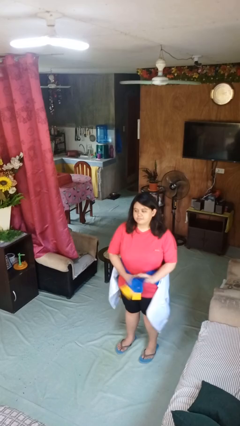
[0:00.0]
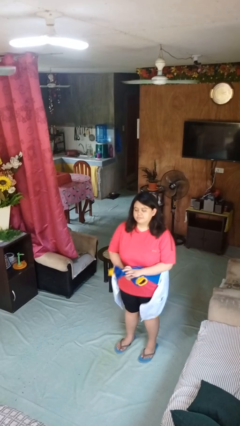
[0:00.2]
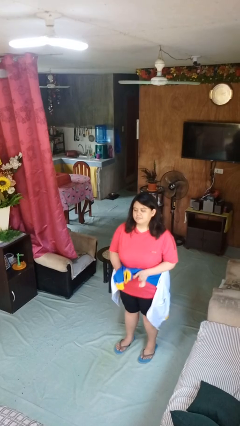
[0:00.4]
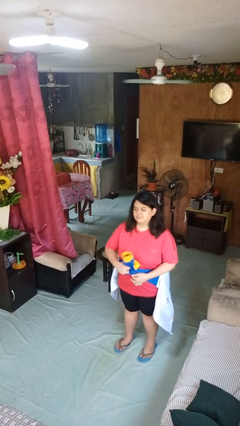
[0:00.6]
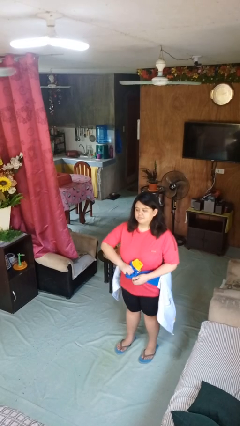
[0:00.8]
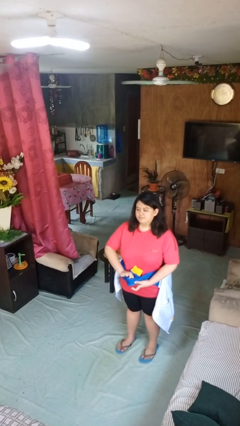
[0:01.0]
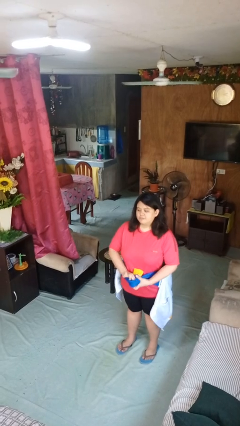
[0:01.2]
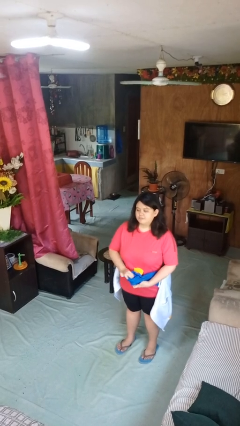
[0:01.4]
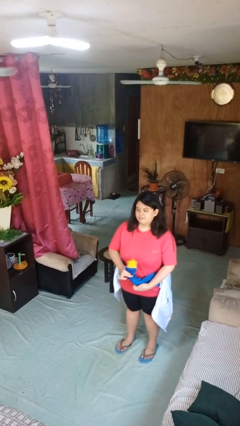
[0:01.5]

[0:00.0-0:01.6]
person ties jacket around waist

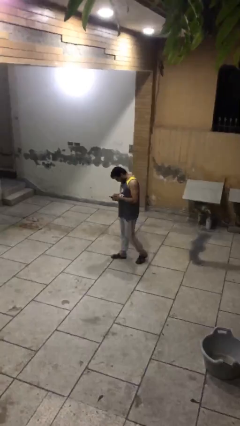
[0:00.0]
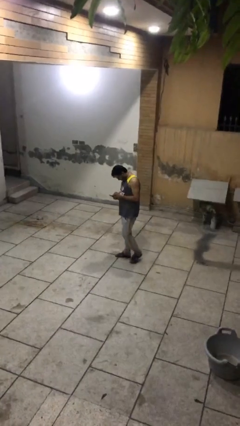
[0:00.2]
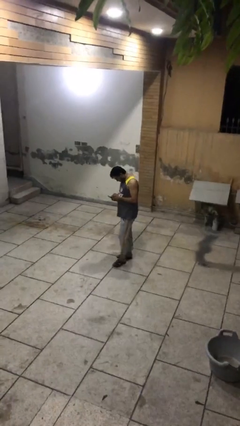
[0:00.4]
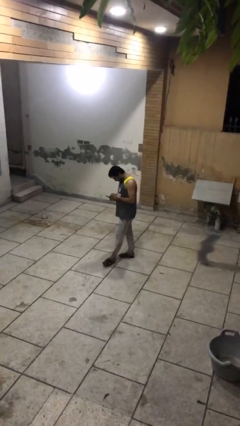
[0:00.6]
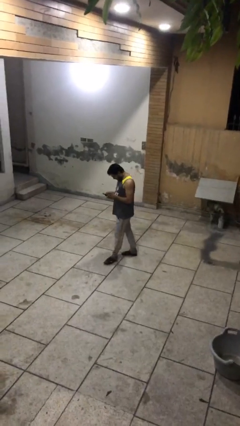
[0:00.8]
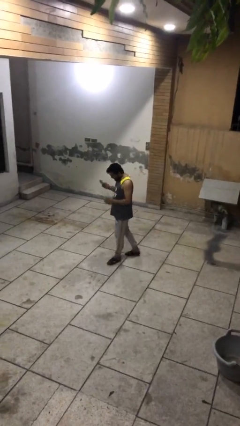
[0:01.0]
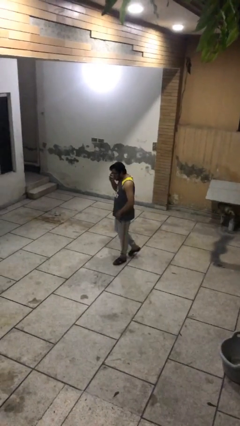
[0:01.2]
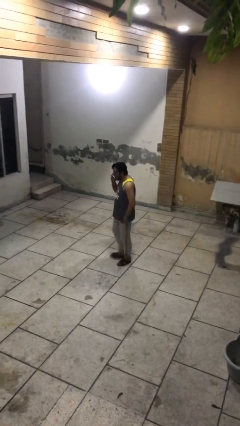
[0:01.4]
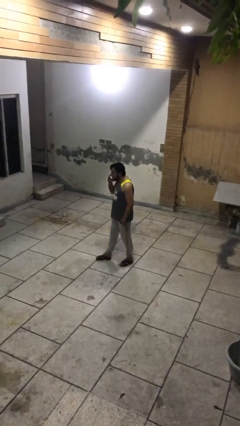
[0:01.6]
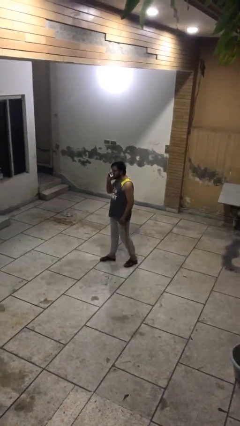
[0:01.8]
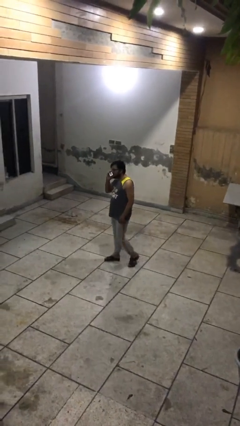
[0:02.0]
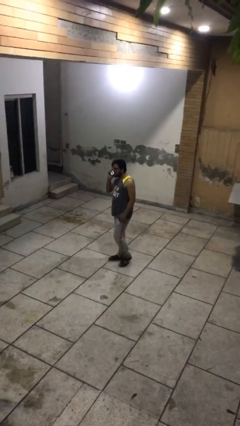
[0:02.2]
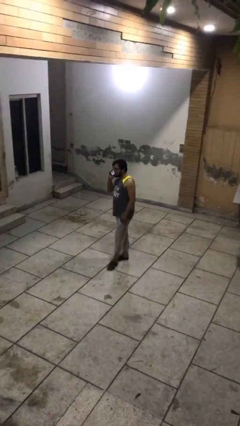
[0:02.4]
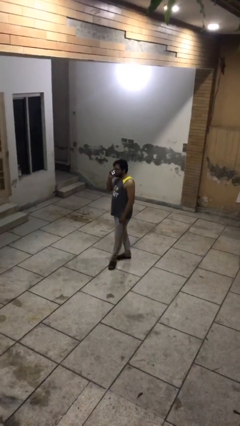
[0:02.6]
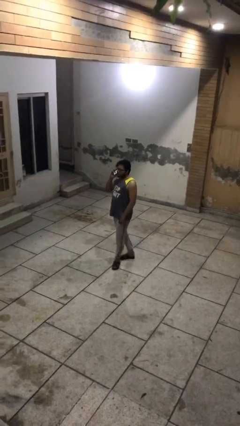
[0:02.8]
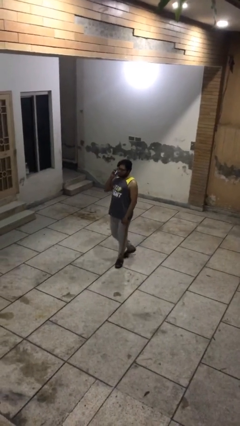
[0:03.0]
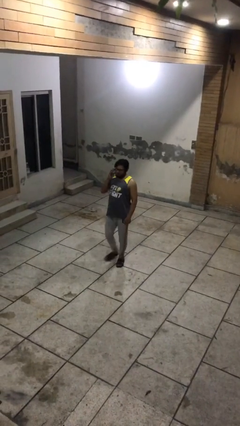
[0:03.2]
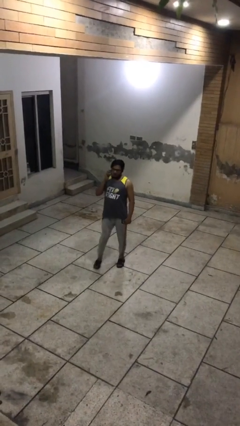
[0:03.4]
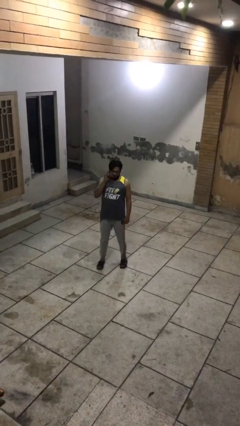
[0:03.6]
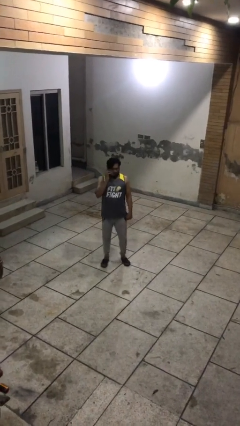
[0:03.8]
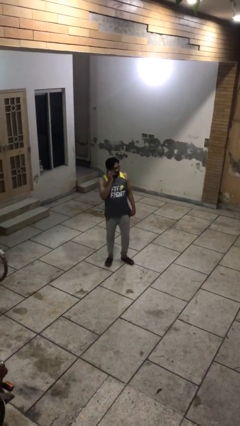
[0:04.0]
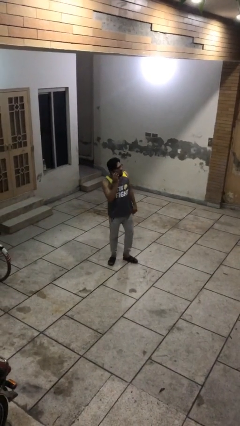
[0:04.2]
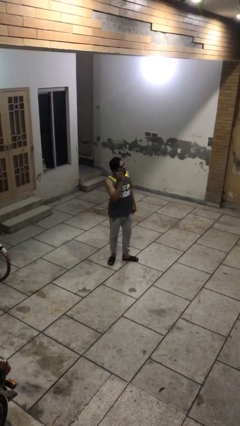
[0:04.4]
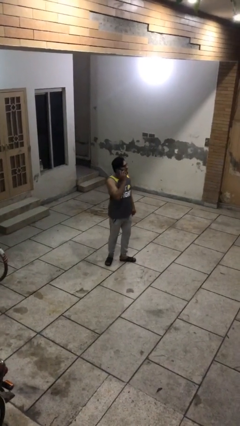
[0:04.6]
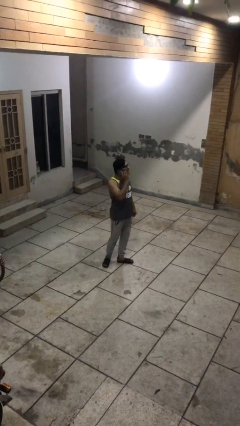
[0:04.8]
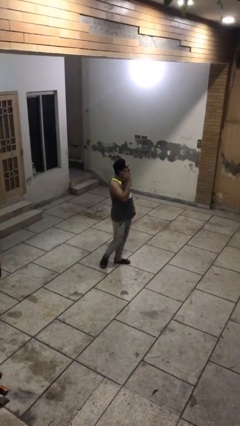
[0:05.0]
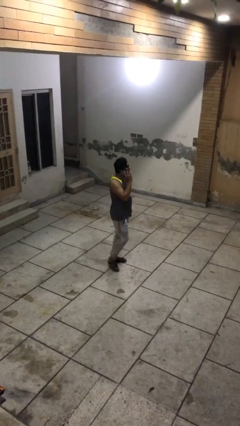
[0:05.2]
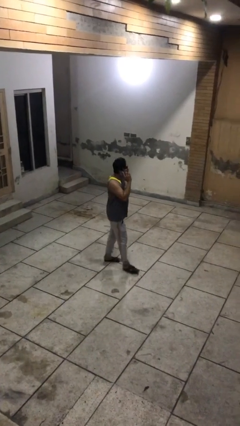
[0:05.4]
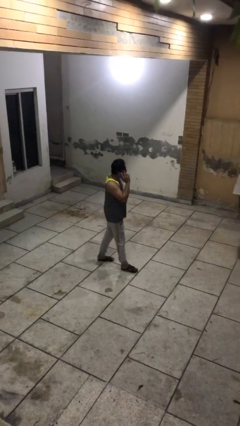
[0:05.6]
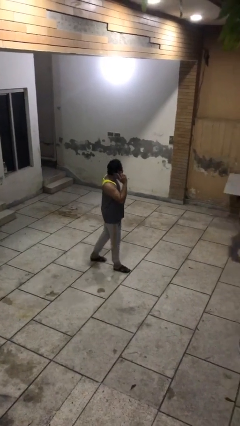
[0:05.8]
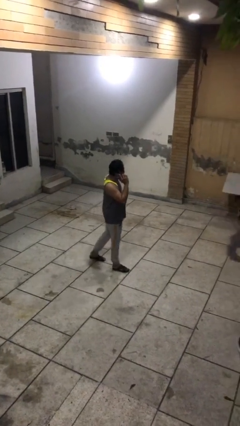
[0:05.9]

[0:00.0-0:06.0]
person talks on phone

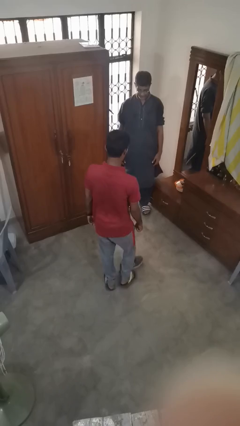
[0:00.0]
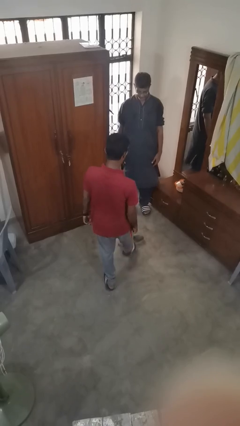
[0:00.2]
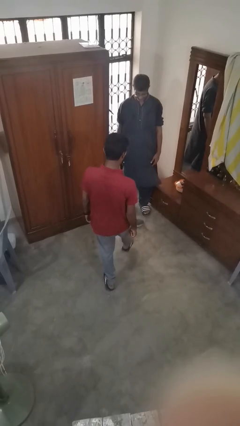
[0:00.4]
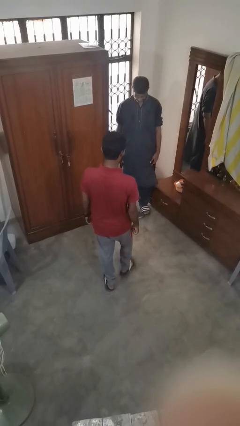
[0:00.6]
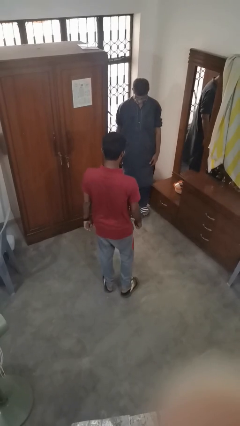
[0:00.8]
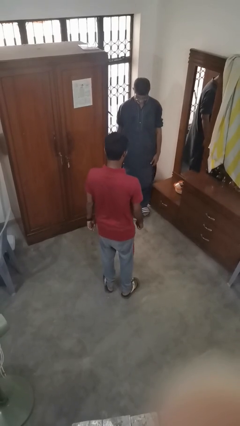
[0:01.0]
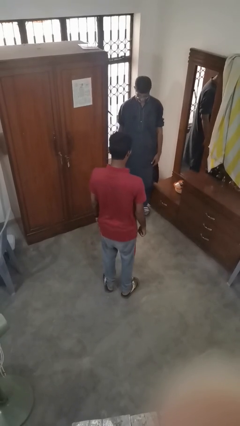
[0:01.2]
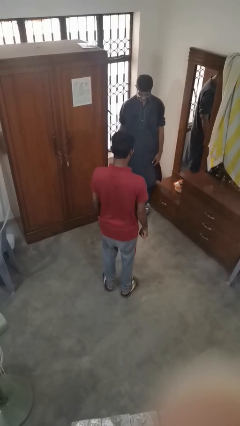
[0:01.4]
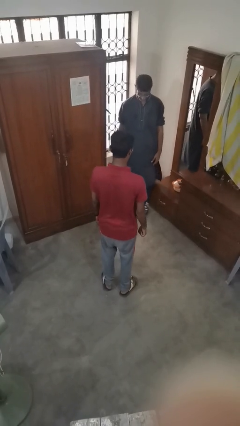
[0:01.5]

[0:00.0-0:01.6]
person kicks object to person

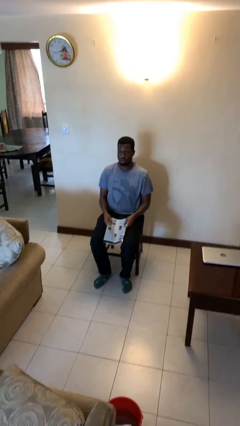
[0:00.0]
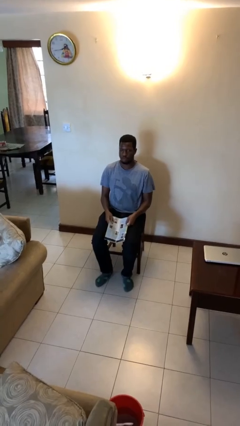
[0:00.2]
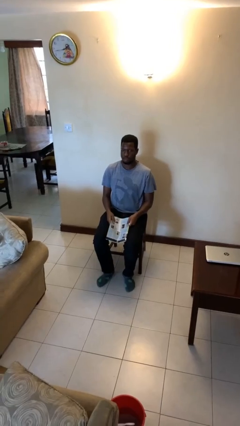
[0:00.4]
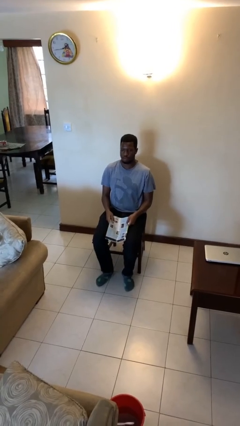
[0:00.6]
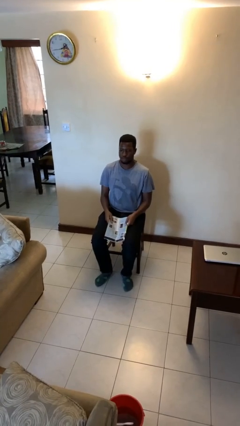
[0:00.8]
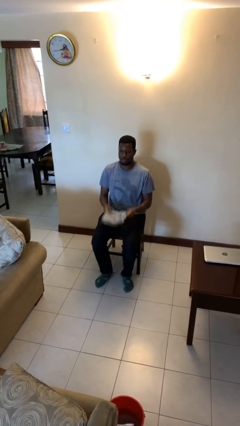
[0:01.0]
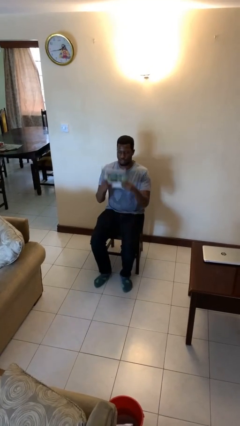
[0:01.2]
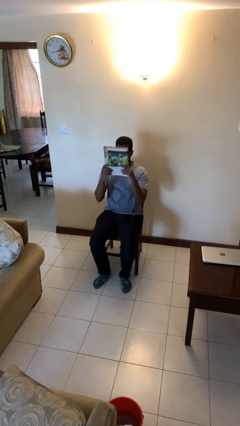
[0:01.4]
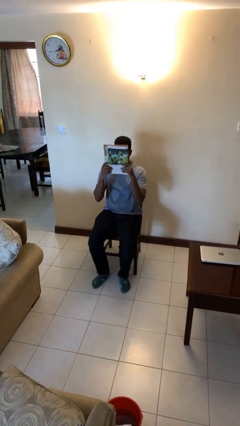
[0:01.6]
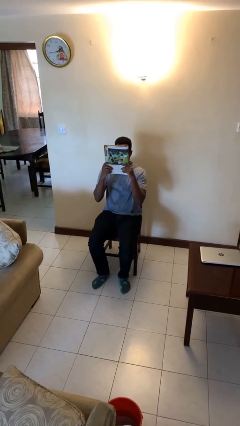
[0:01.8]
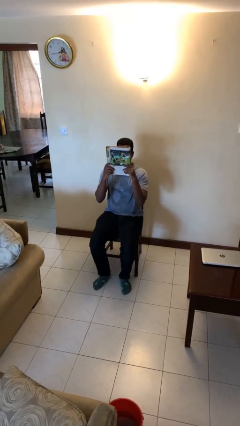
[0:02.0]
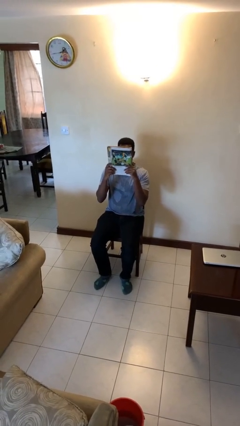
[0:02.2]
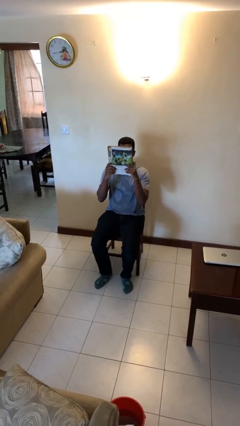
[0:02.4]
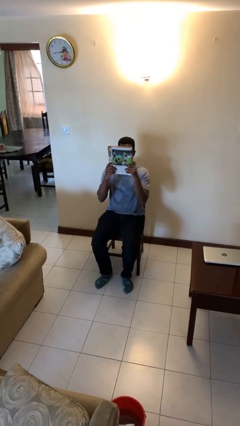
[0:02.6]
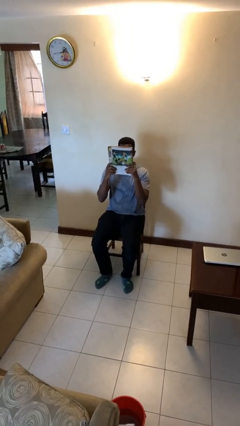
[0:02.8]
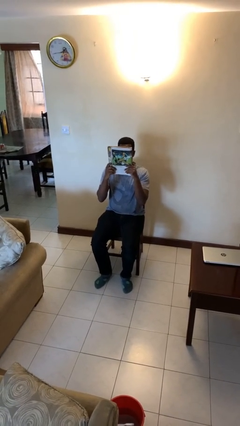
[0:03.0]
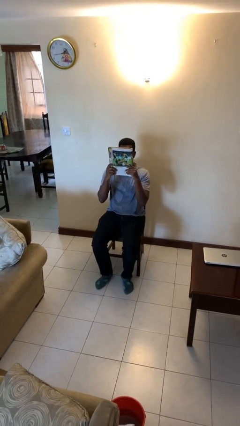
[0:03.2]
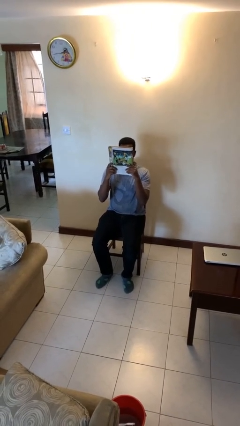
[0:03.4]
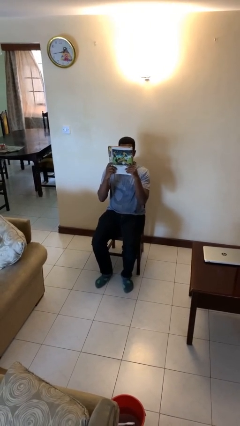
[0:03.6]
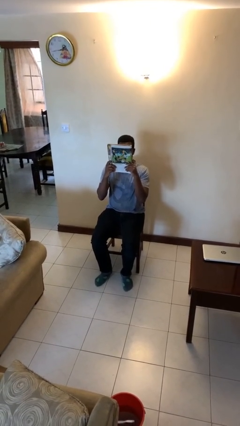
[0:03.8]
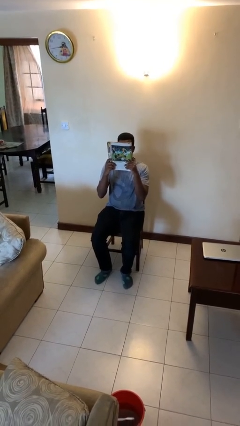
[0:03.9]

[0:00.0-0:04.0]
person reads document

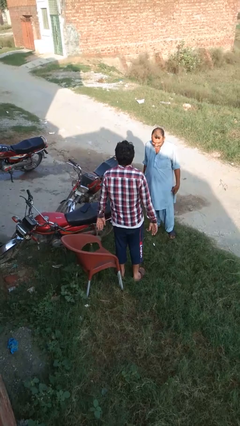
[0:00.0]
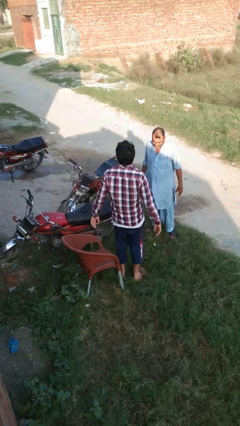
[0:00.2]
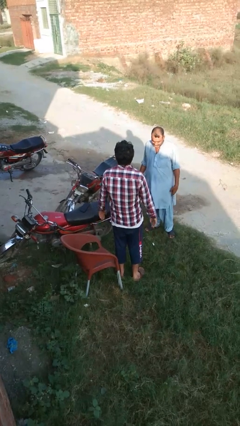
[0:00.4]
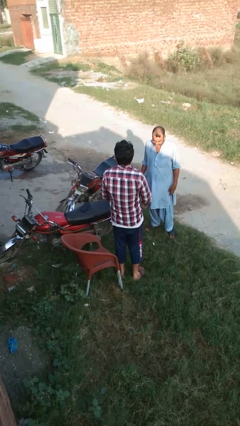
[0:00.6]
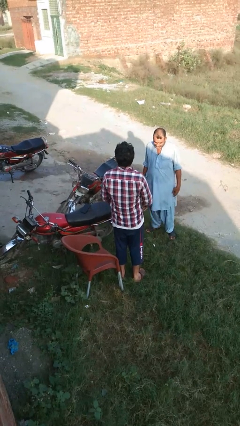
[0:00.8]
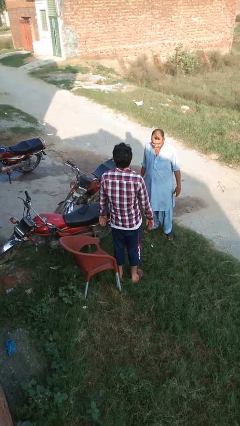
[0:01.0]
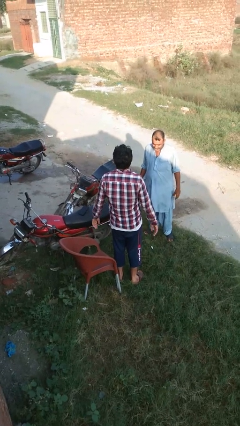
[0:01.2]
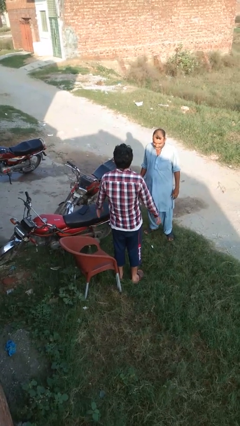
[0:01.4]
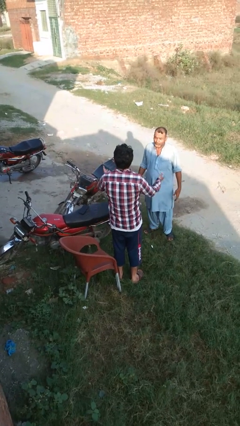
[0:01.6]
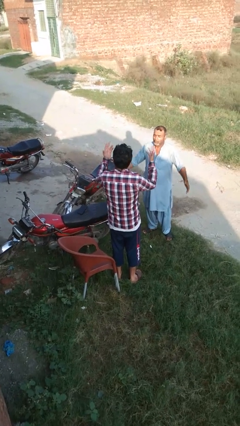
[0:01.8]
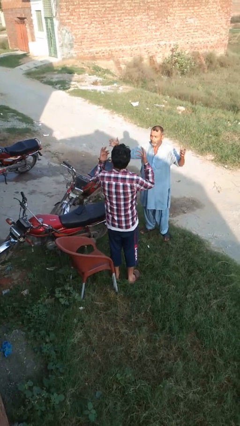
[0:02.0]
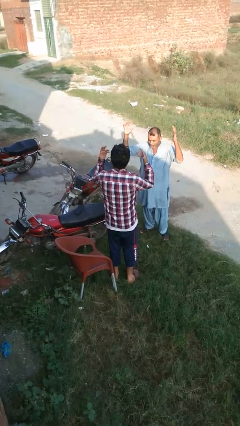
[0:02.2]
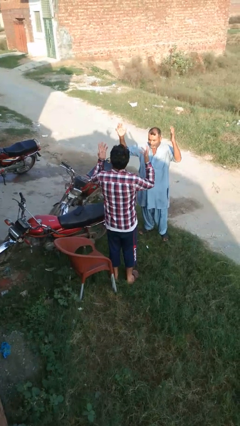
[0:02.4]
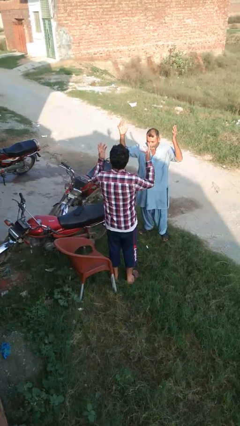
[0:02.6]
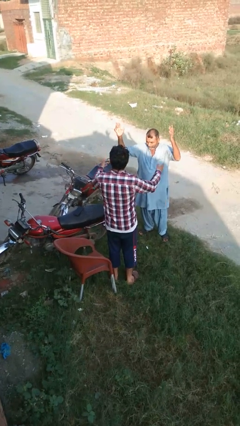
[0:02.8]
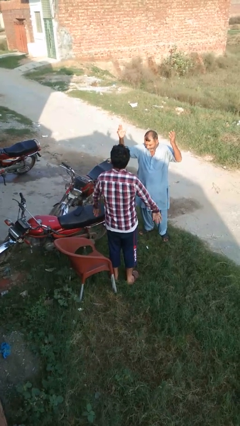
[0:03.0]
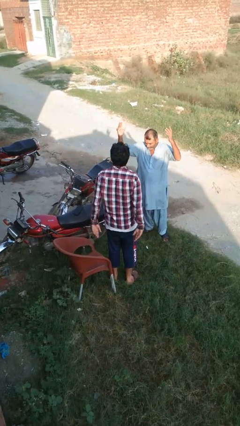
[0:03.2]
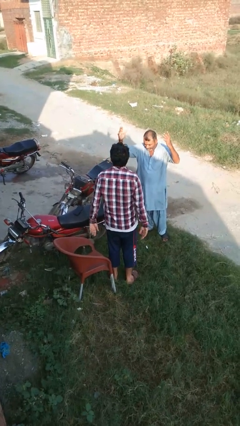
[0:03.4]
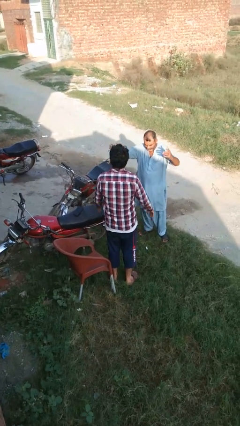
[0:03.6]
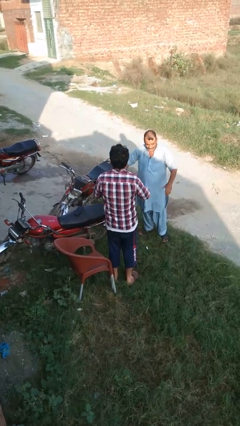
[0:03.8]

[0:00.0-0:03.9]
person laughs with person
